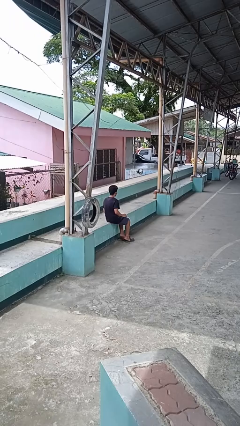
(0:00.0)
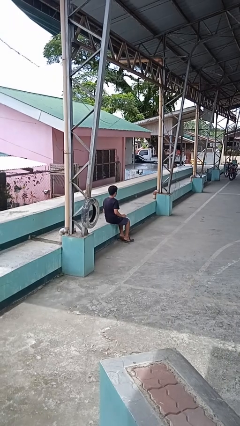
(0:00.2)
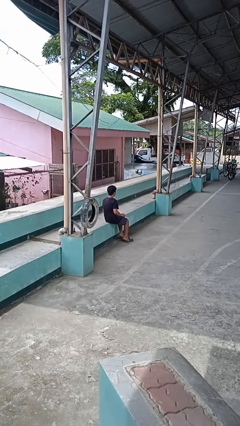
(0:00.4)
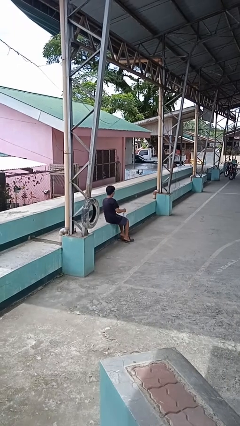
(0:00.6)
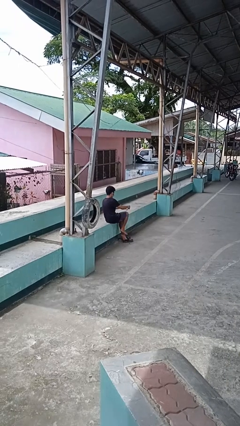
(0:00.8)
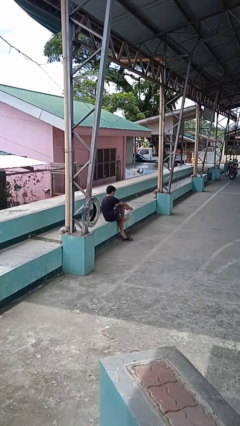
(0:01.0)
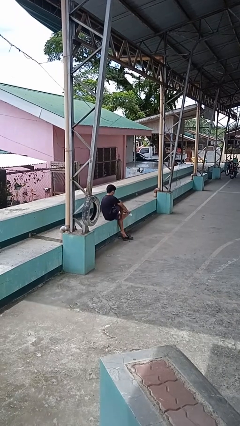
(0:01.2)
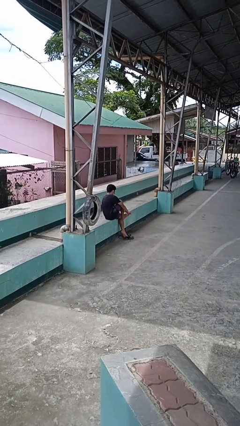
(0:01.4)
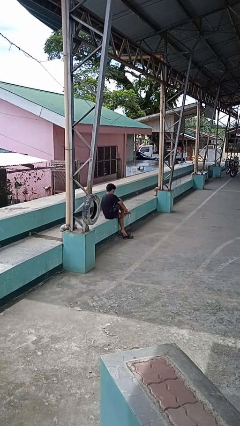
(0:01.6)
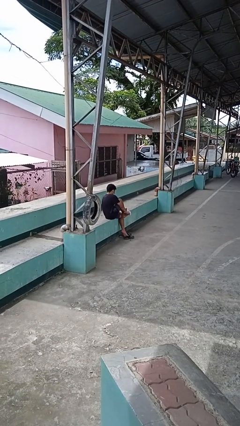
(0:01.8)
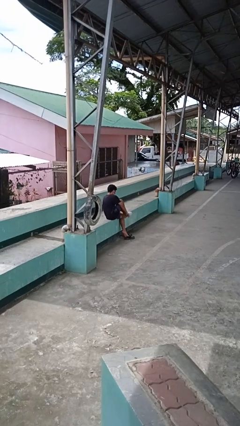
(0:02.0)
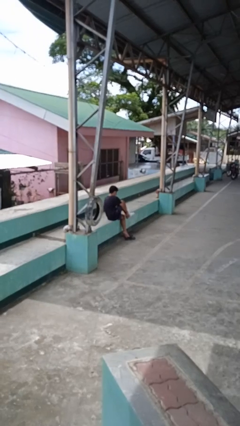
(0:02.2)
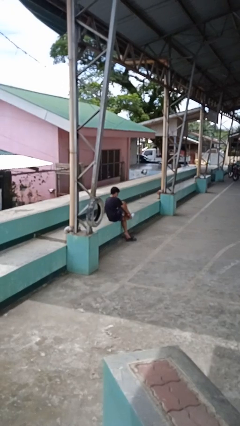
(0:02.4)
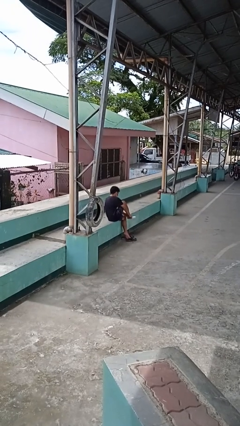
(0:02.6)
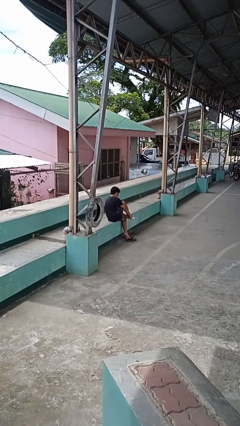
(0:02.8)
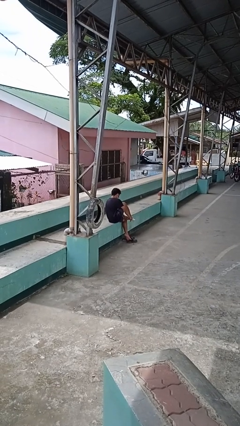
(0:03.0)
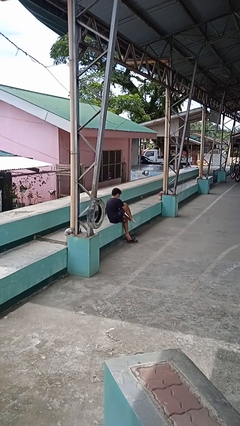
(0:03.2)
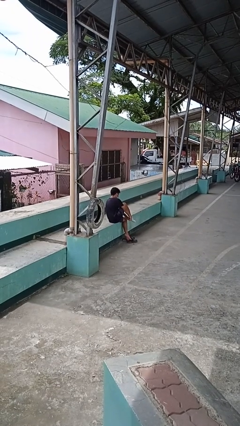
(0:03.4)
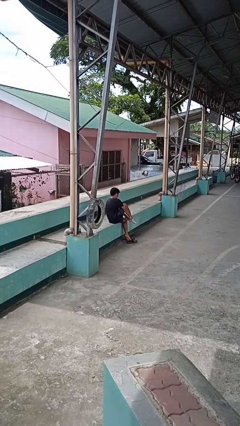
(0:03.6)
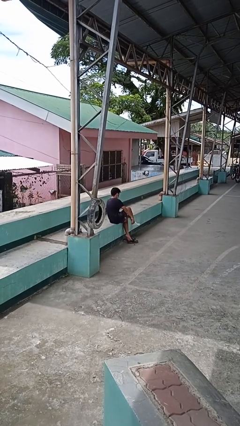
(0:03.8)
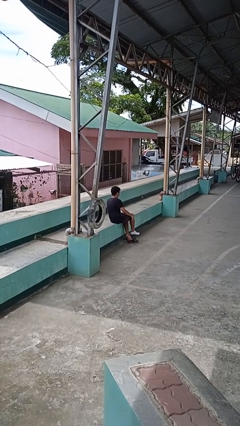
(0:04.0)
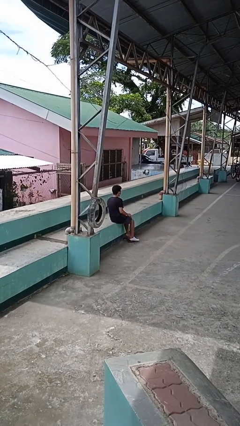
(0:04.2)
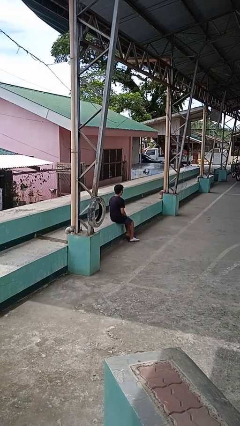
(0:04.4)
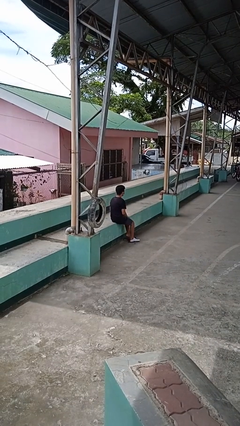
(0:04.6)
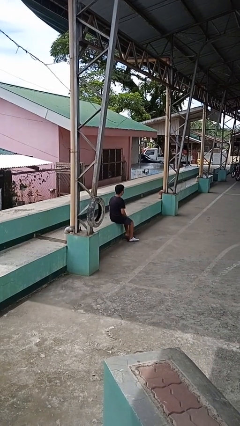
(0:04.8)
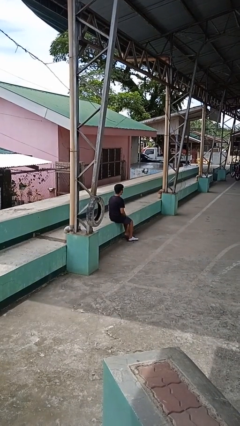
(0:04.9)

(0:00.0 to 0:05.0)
person puts on socks

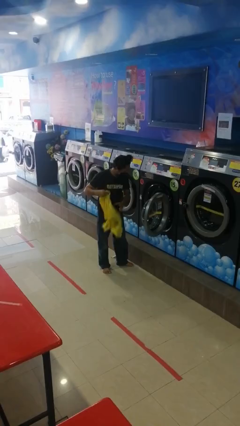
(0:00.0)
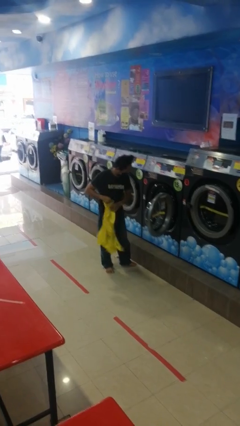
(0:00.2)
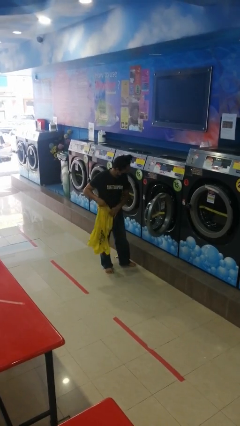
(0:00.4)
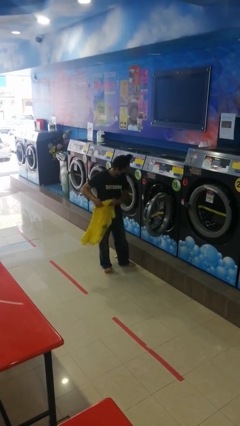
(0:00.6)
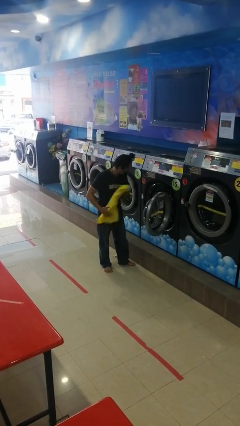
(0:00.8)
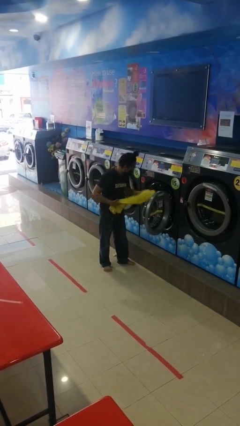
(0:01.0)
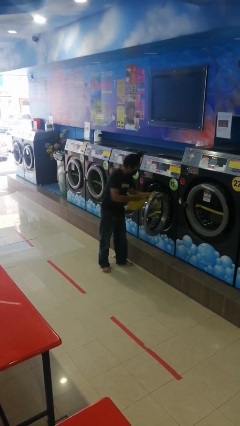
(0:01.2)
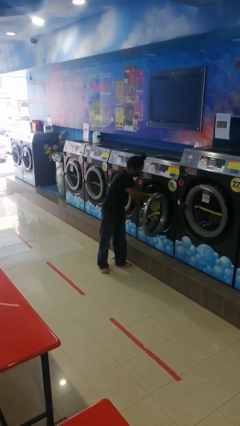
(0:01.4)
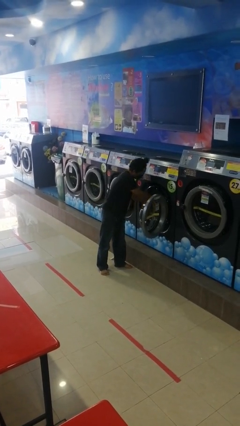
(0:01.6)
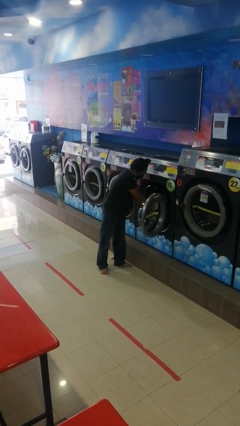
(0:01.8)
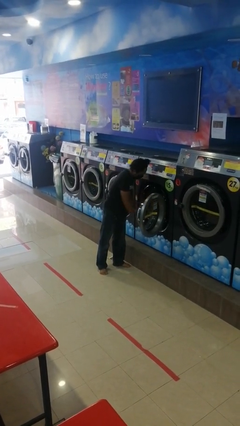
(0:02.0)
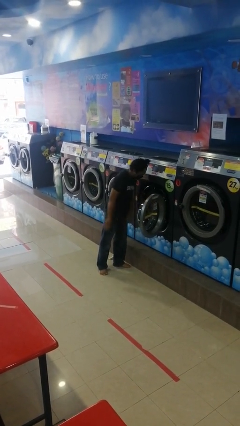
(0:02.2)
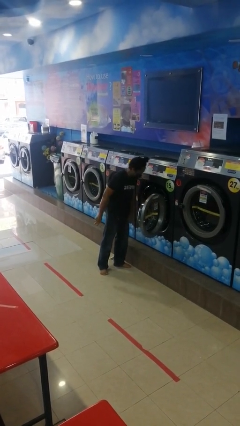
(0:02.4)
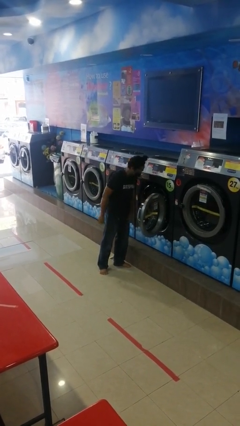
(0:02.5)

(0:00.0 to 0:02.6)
person loads clotheswasher

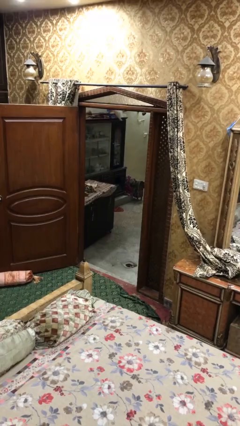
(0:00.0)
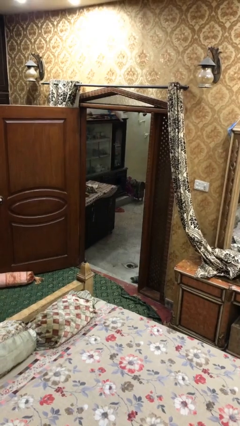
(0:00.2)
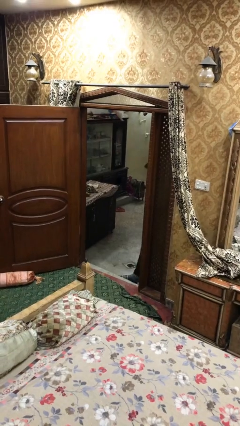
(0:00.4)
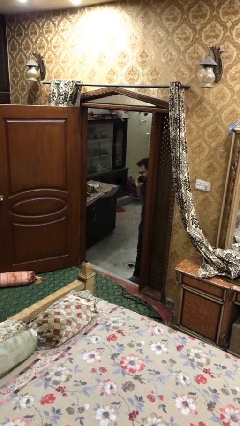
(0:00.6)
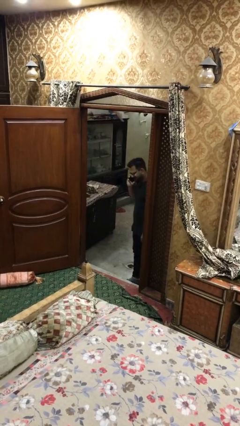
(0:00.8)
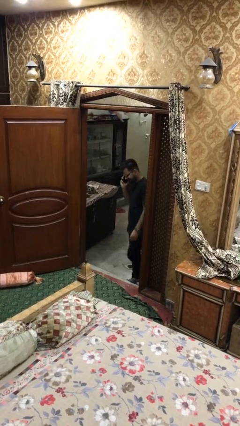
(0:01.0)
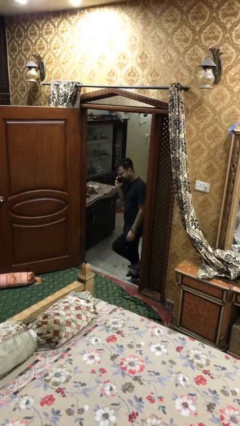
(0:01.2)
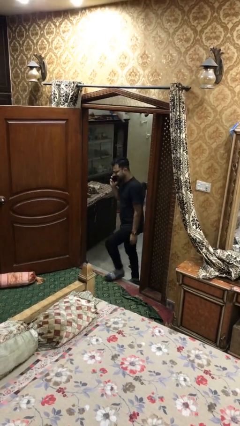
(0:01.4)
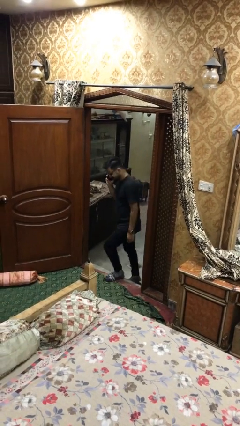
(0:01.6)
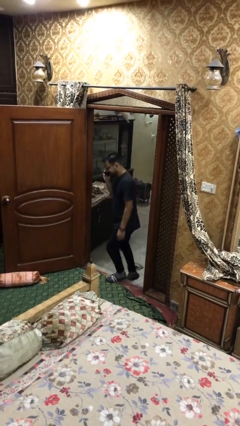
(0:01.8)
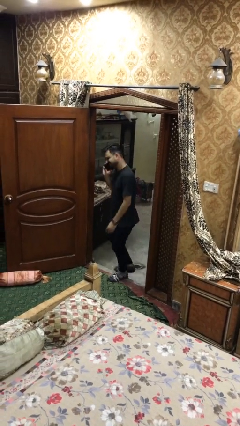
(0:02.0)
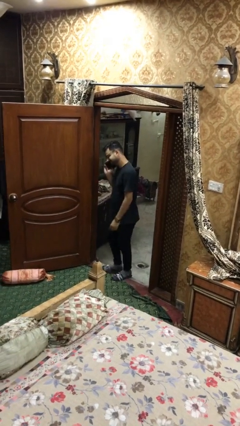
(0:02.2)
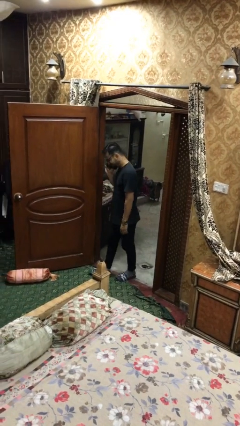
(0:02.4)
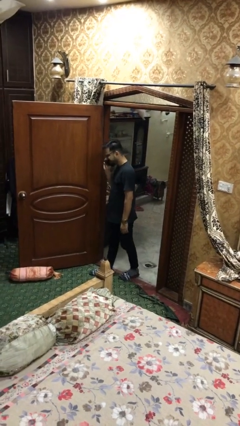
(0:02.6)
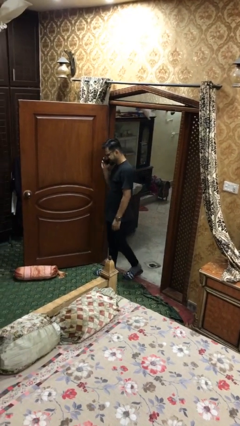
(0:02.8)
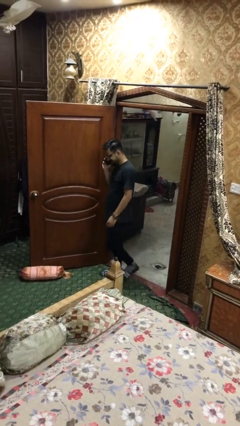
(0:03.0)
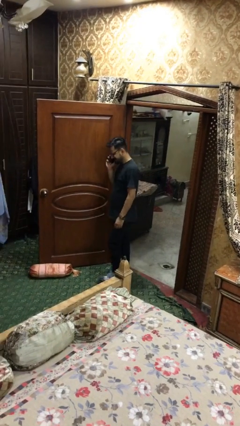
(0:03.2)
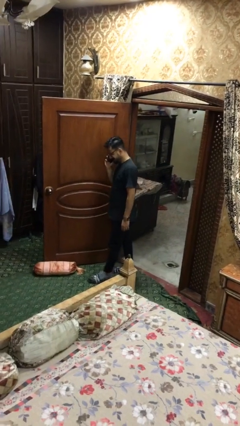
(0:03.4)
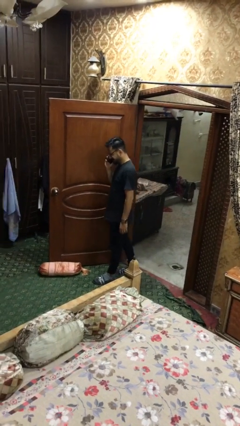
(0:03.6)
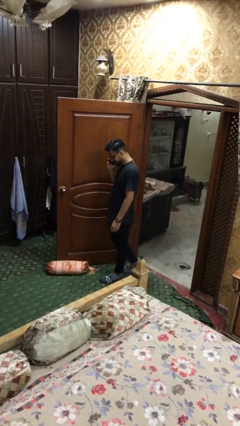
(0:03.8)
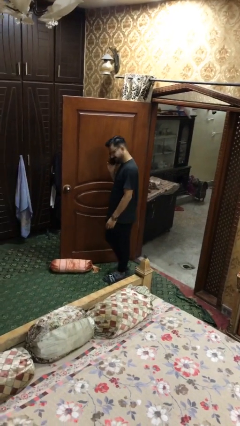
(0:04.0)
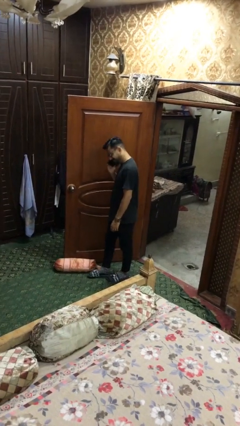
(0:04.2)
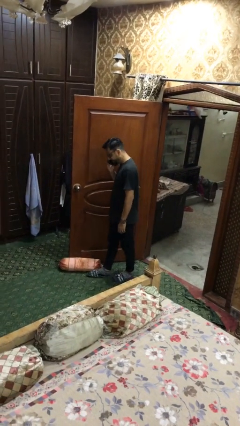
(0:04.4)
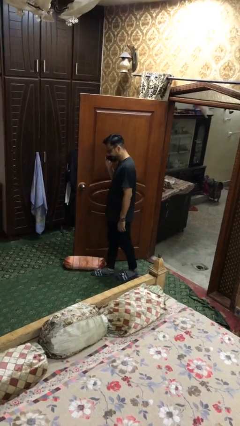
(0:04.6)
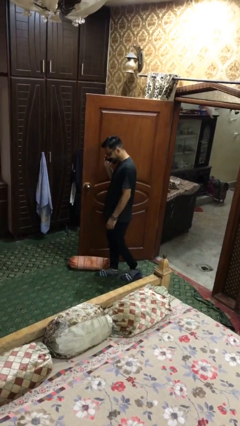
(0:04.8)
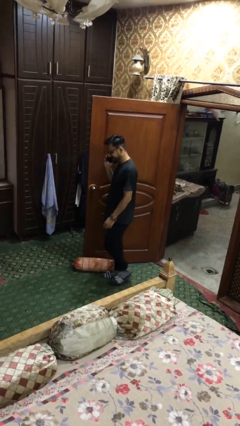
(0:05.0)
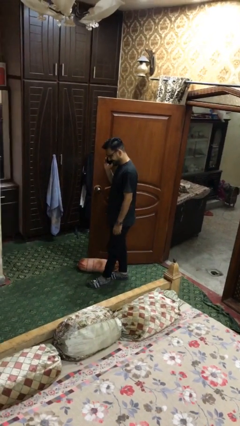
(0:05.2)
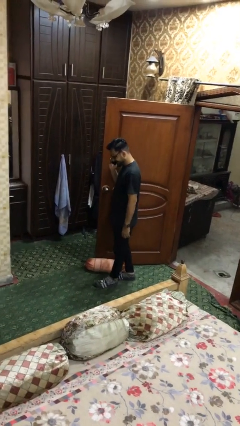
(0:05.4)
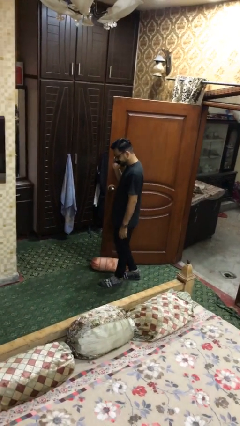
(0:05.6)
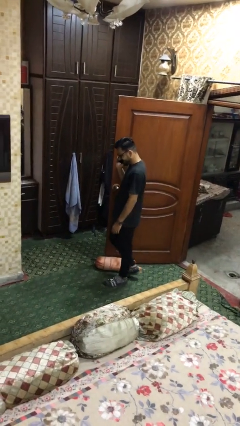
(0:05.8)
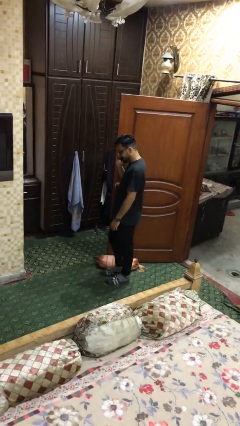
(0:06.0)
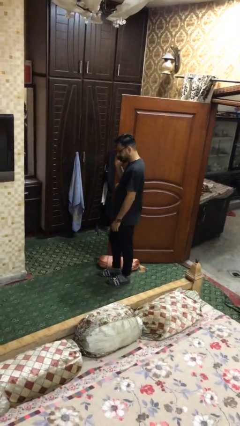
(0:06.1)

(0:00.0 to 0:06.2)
person enters scene through structure

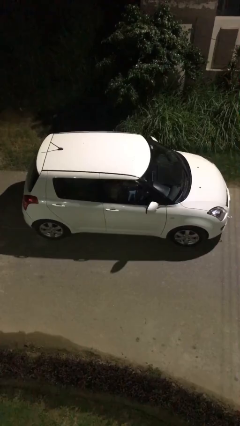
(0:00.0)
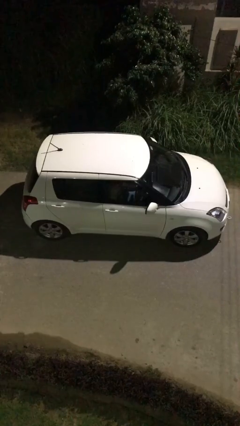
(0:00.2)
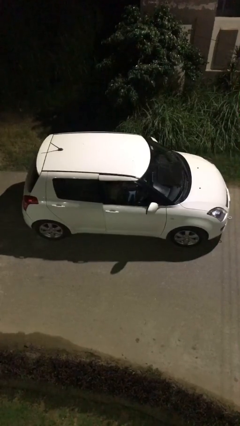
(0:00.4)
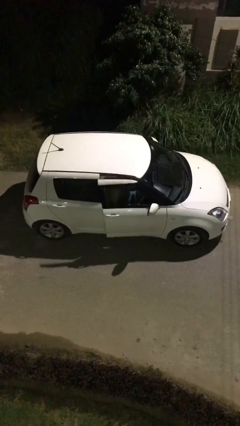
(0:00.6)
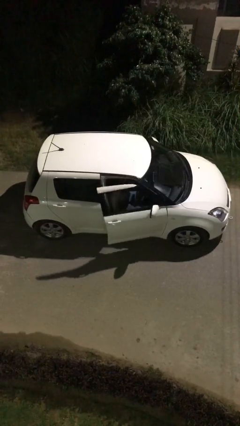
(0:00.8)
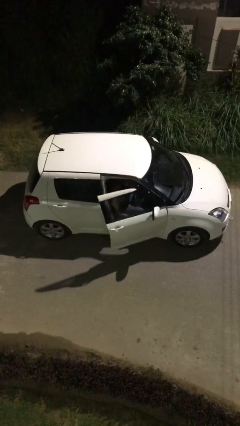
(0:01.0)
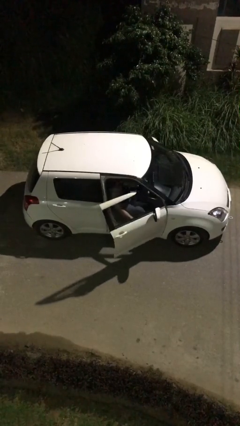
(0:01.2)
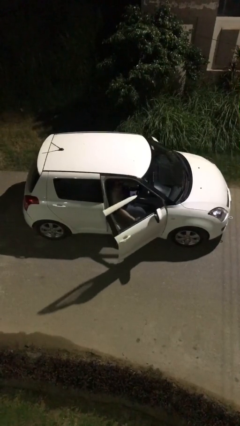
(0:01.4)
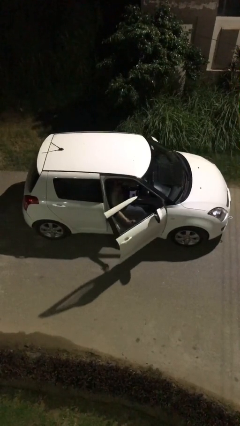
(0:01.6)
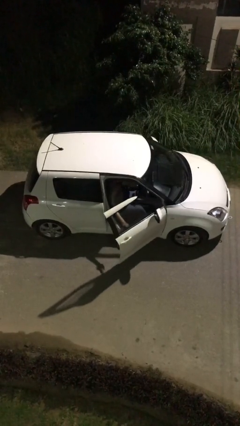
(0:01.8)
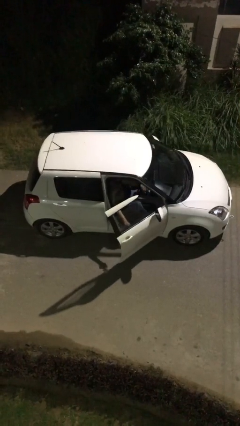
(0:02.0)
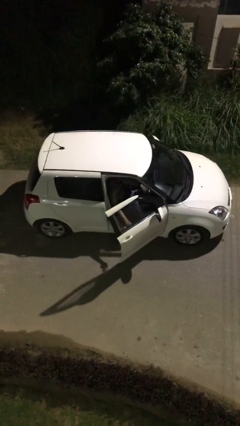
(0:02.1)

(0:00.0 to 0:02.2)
person opens car door

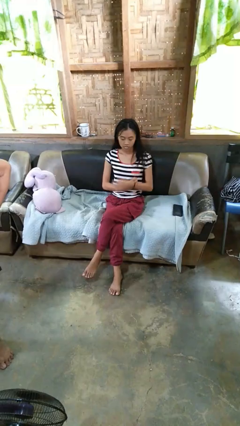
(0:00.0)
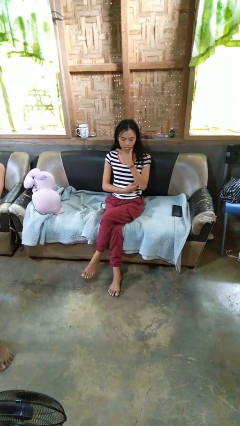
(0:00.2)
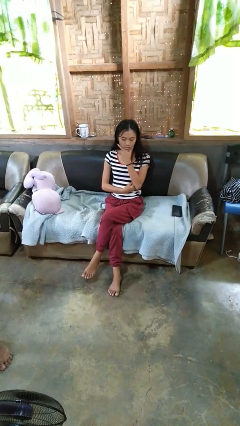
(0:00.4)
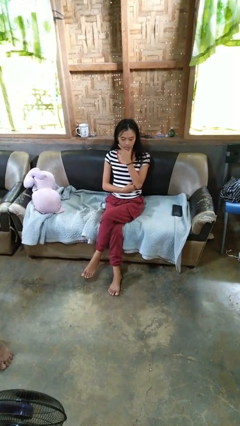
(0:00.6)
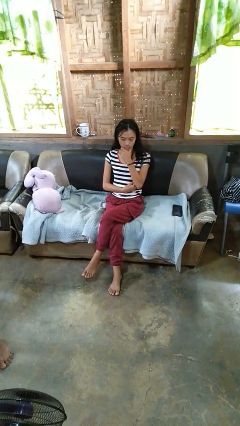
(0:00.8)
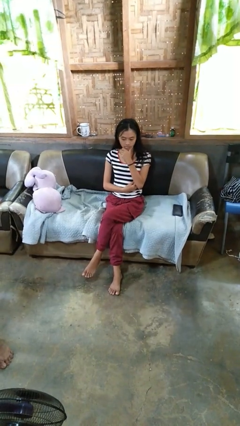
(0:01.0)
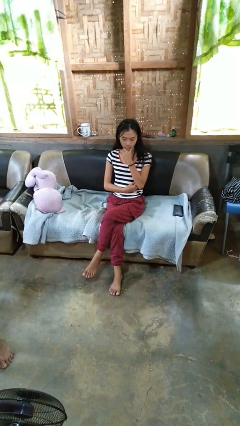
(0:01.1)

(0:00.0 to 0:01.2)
person strokes chin

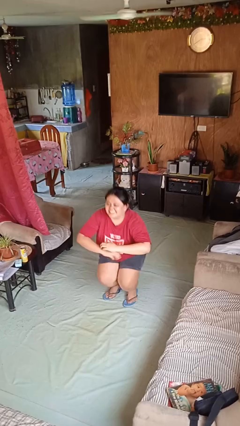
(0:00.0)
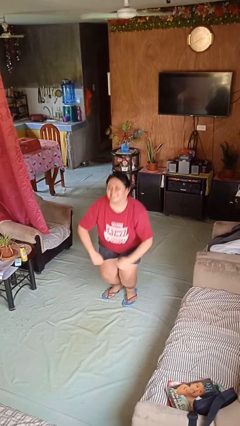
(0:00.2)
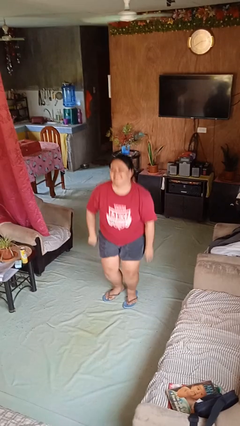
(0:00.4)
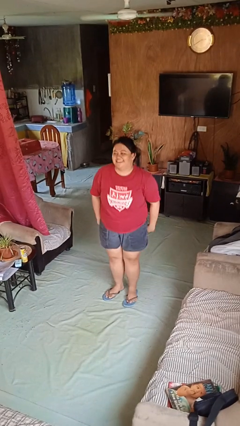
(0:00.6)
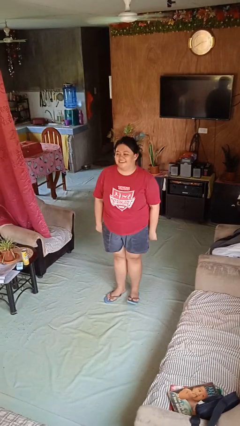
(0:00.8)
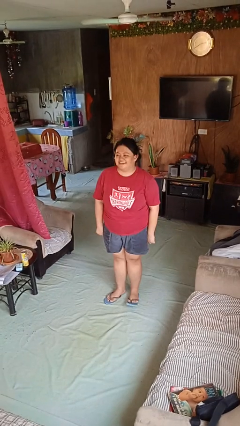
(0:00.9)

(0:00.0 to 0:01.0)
person stands up
